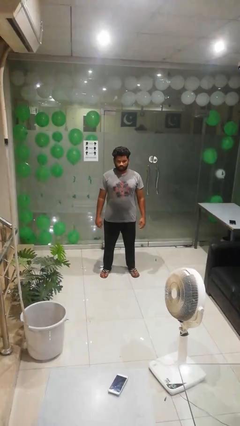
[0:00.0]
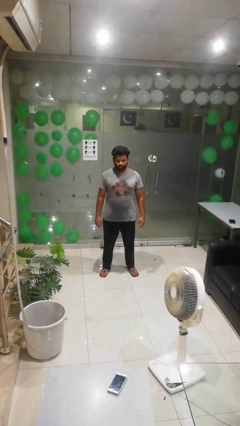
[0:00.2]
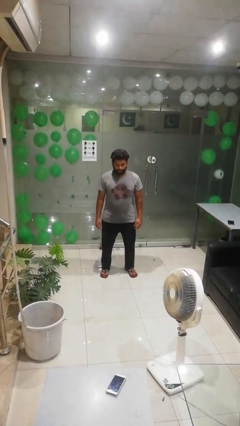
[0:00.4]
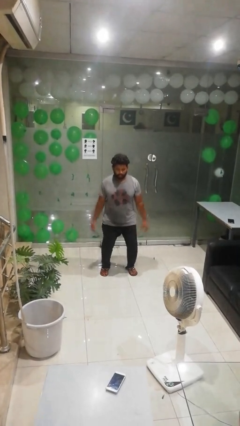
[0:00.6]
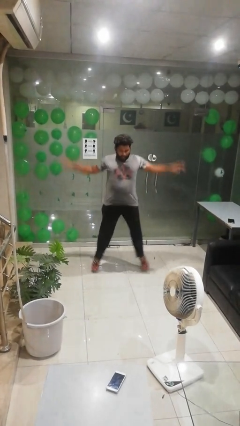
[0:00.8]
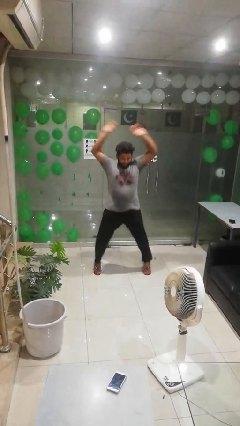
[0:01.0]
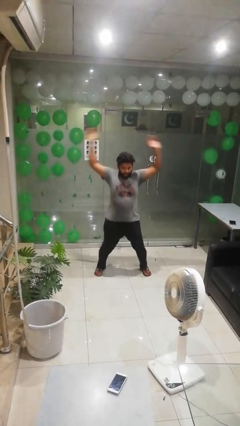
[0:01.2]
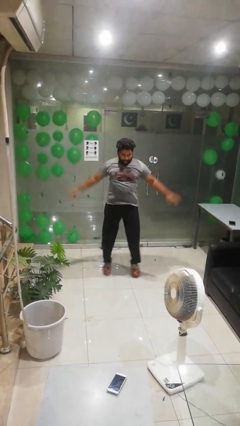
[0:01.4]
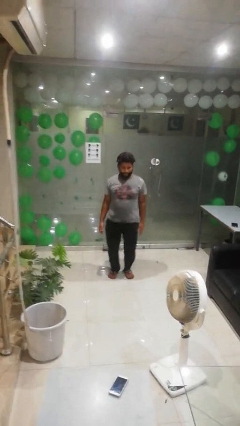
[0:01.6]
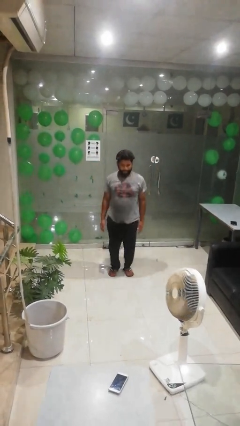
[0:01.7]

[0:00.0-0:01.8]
person exercises with jumping jacks

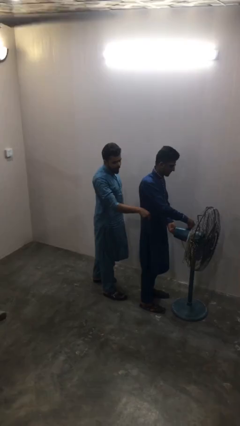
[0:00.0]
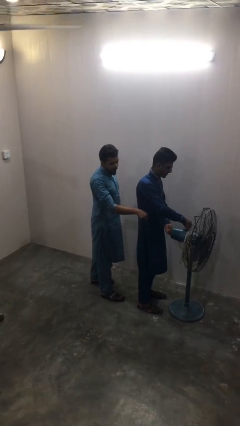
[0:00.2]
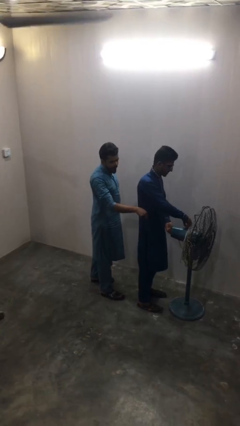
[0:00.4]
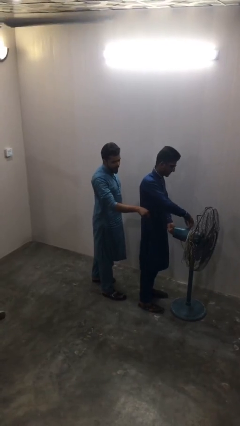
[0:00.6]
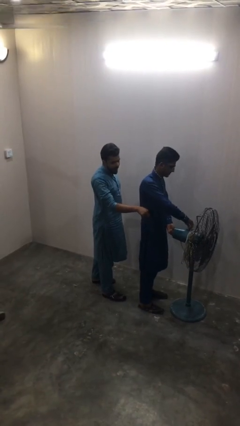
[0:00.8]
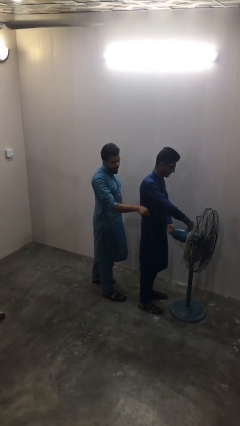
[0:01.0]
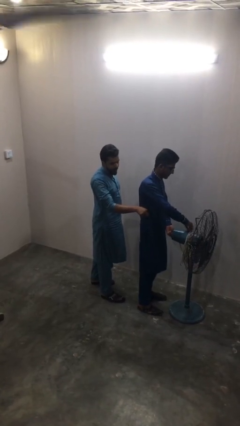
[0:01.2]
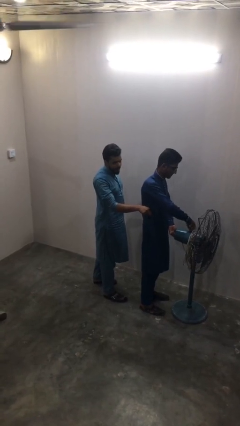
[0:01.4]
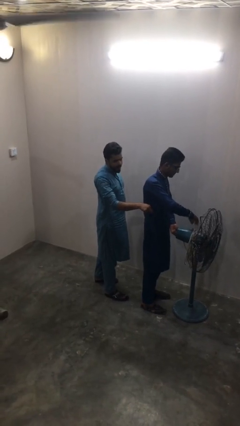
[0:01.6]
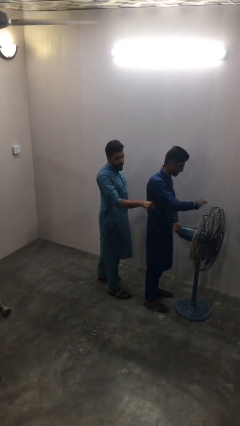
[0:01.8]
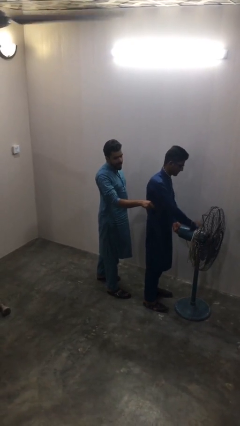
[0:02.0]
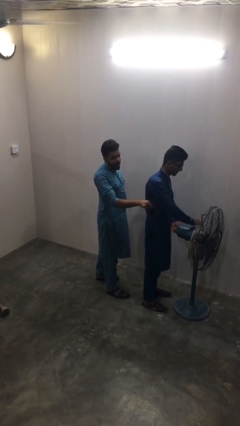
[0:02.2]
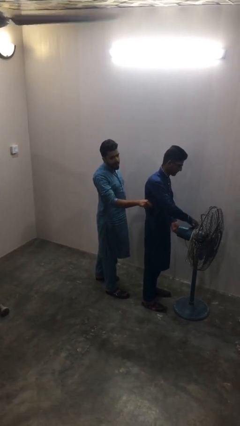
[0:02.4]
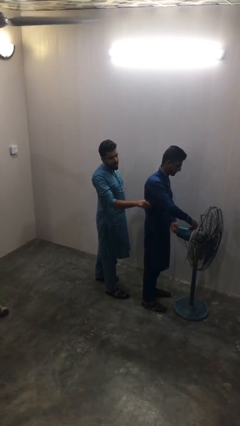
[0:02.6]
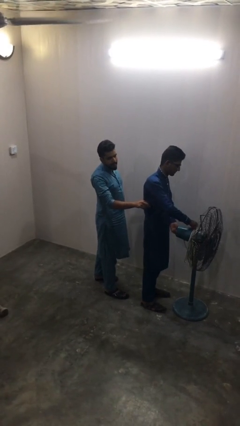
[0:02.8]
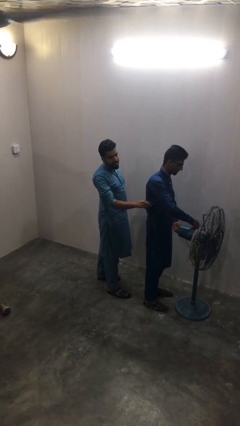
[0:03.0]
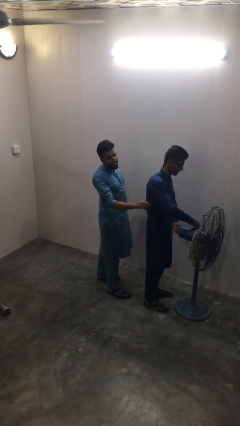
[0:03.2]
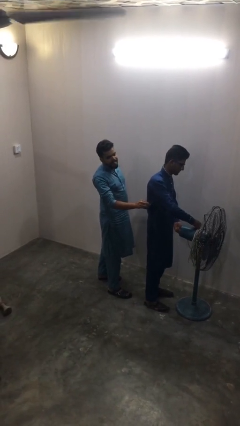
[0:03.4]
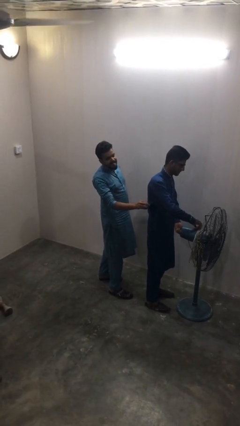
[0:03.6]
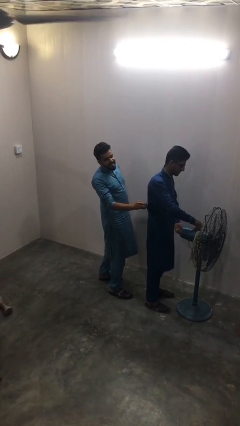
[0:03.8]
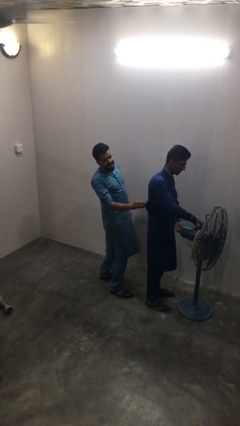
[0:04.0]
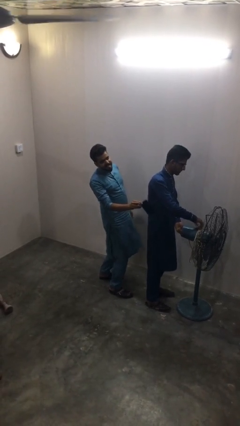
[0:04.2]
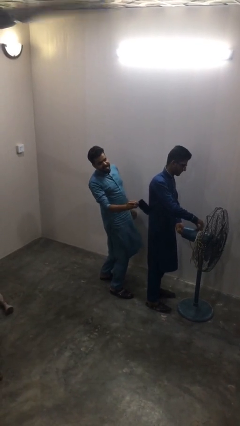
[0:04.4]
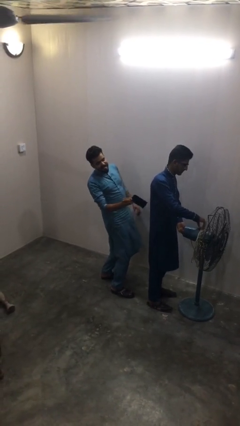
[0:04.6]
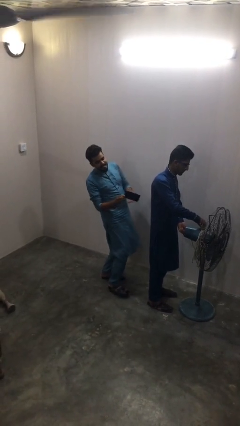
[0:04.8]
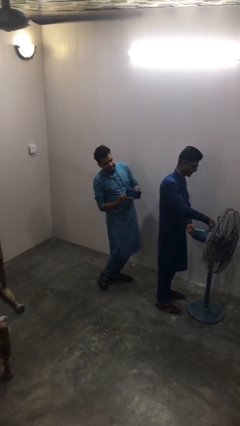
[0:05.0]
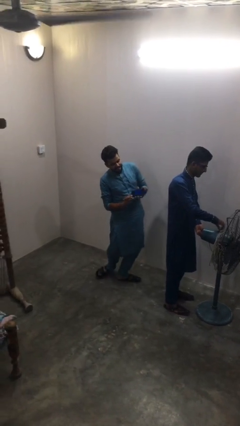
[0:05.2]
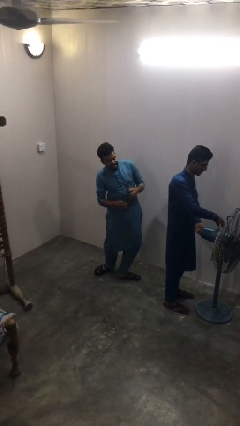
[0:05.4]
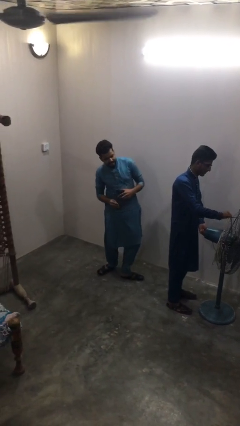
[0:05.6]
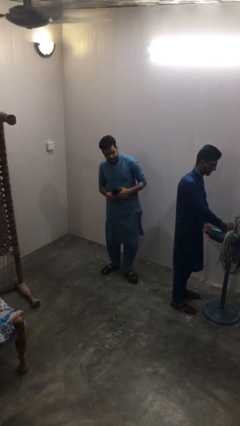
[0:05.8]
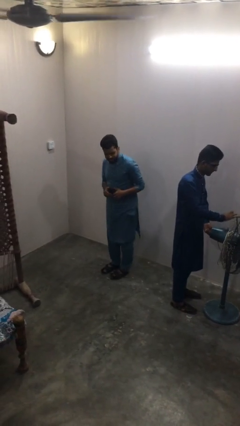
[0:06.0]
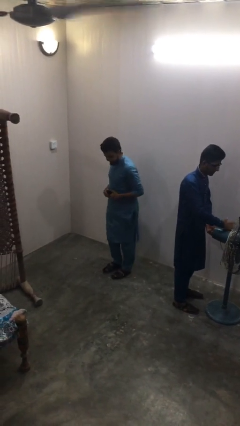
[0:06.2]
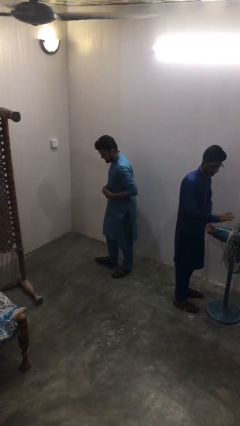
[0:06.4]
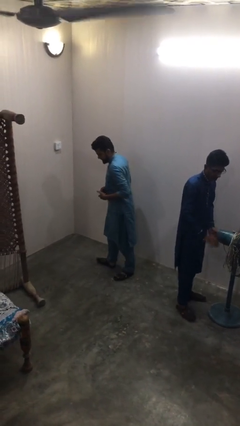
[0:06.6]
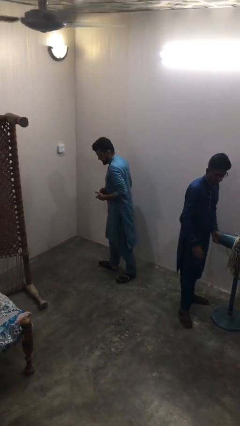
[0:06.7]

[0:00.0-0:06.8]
person steals object from person

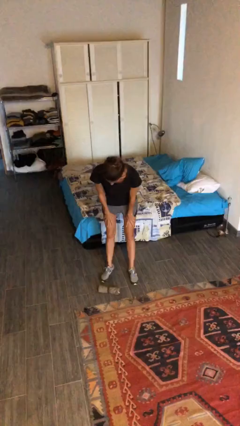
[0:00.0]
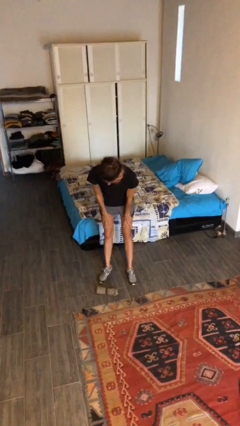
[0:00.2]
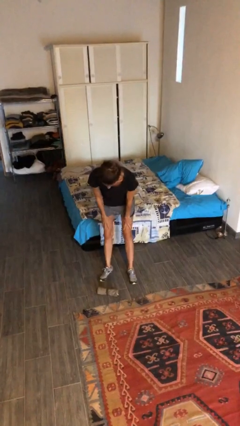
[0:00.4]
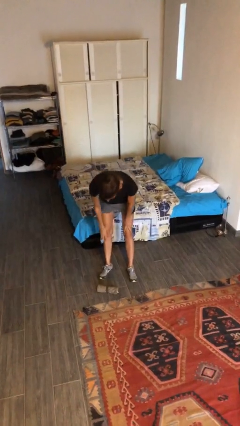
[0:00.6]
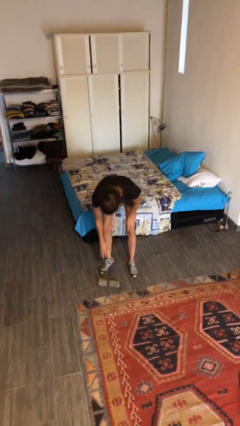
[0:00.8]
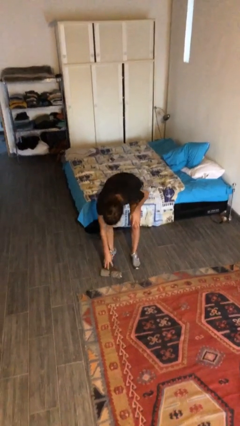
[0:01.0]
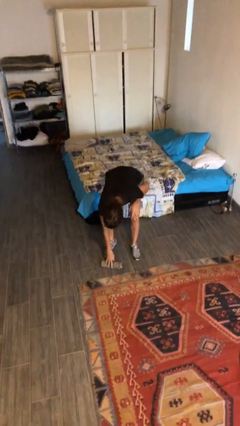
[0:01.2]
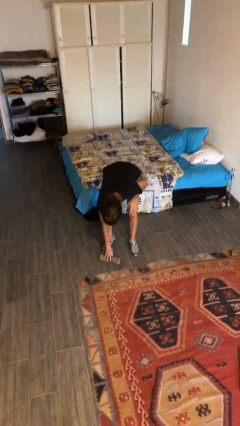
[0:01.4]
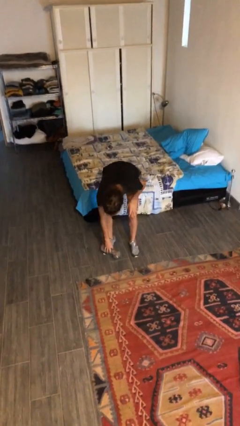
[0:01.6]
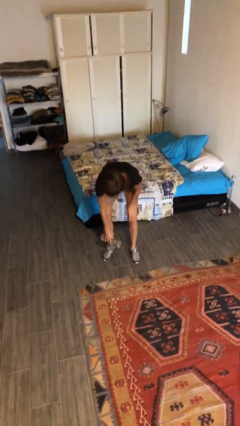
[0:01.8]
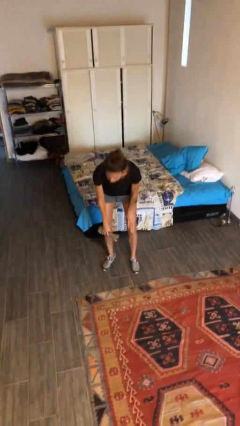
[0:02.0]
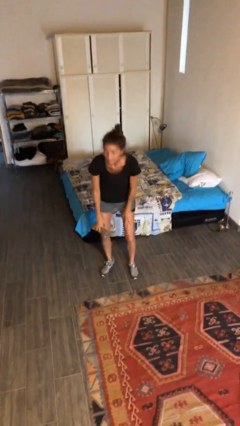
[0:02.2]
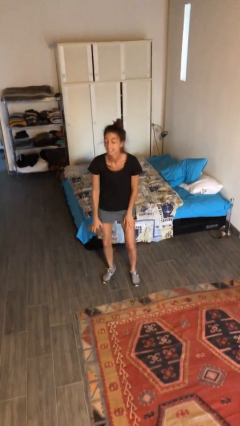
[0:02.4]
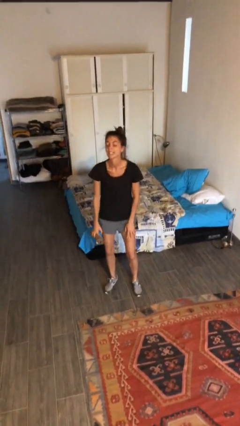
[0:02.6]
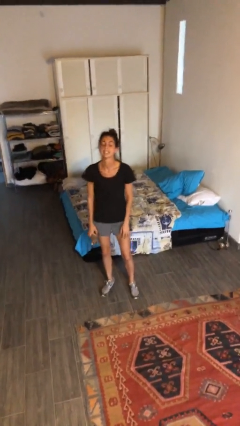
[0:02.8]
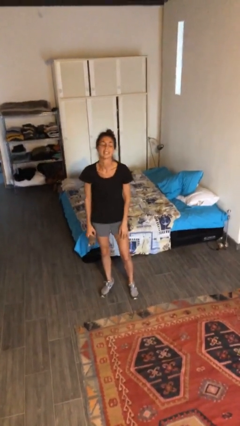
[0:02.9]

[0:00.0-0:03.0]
person picks up object from floor

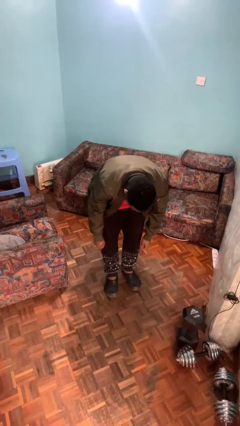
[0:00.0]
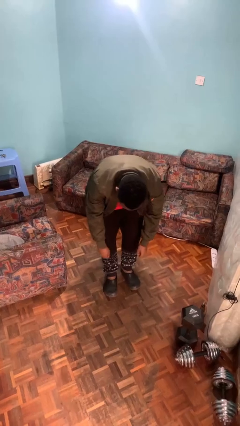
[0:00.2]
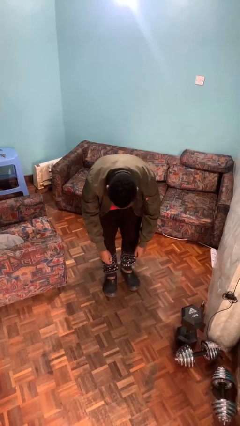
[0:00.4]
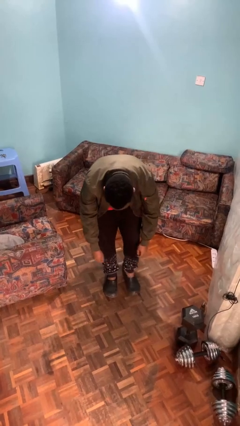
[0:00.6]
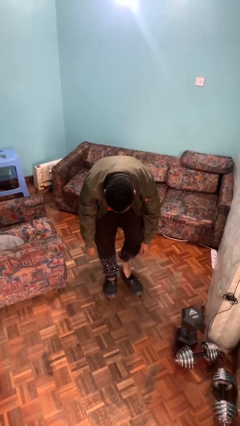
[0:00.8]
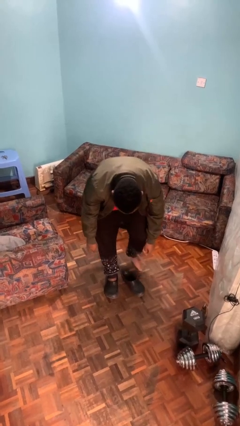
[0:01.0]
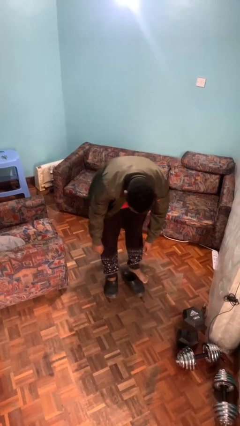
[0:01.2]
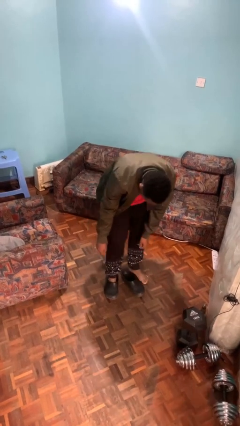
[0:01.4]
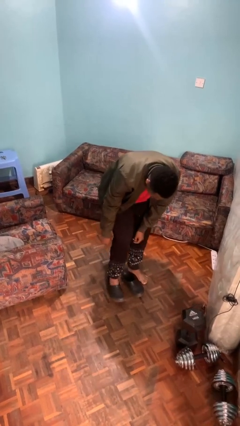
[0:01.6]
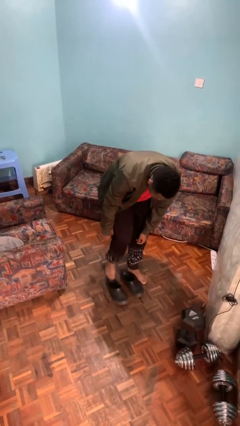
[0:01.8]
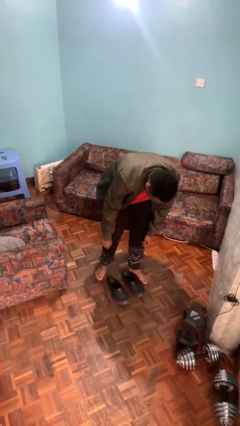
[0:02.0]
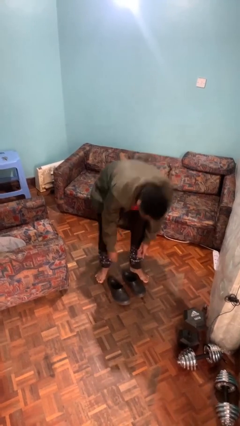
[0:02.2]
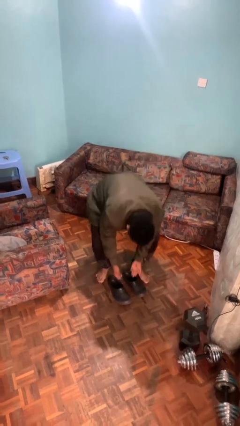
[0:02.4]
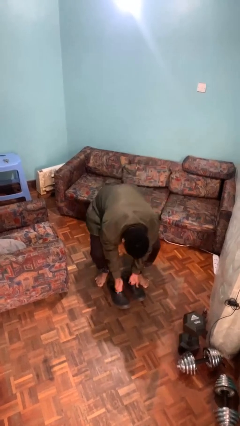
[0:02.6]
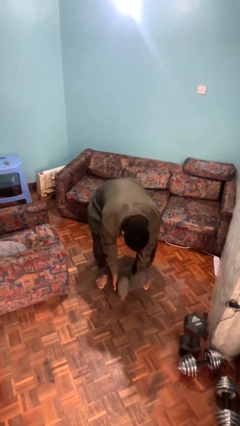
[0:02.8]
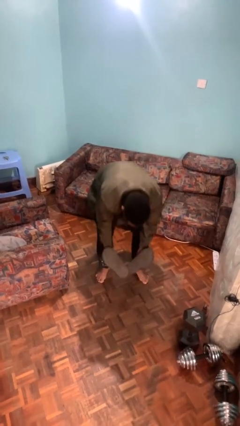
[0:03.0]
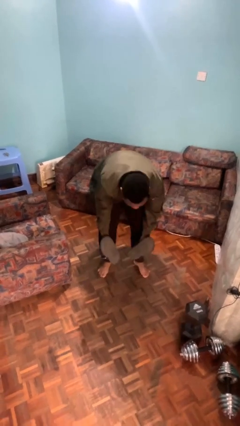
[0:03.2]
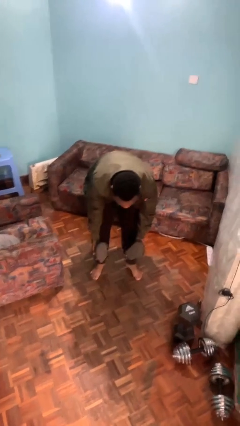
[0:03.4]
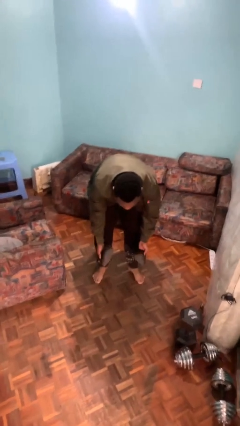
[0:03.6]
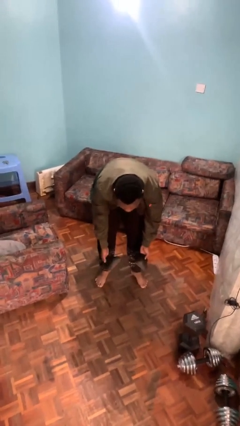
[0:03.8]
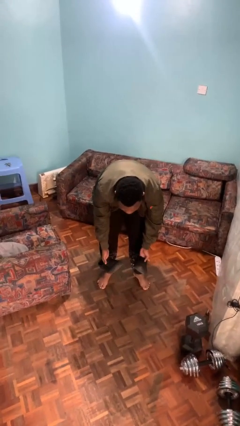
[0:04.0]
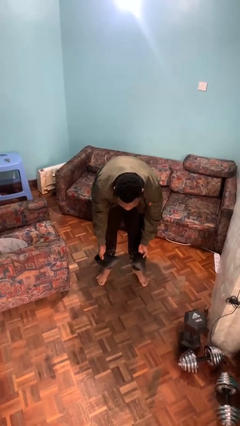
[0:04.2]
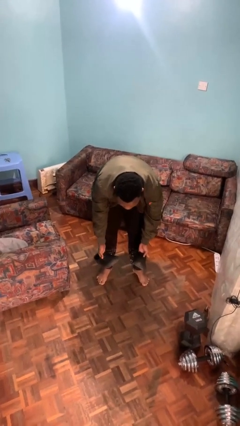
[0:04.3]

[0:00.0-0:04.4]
person takes off shoes

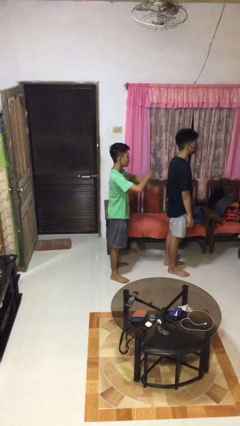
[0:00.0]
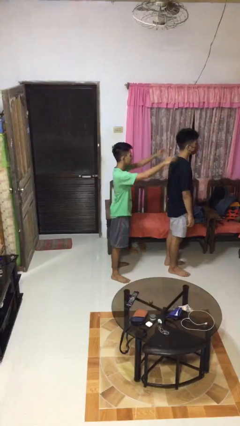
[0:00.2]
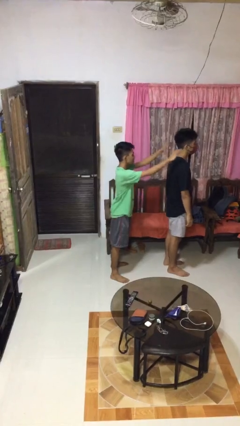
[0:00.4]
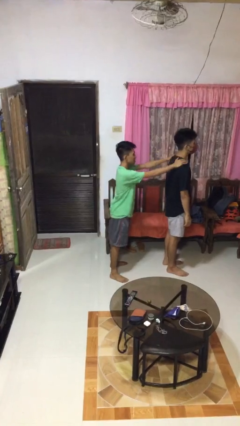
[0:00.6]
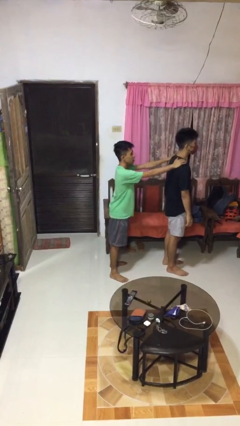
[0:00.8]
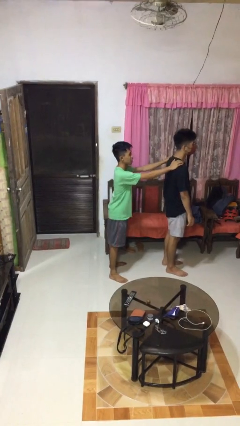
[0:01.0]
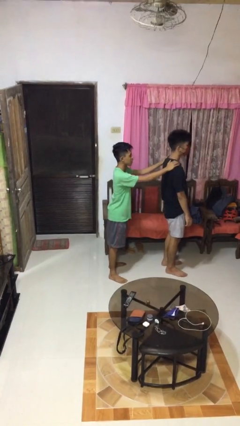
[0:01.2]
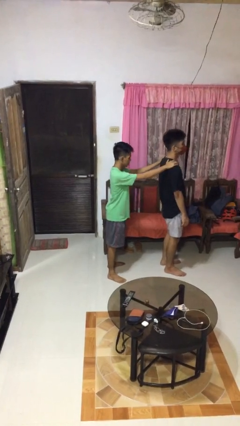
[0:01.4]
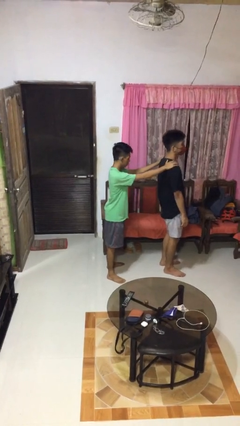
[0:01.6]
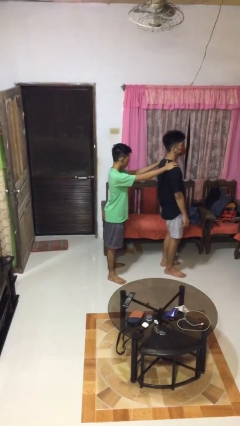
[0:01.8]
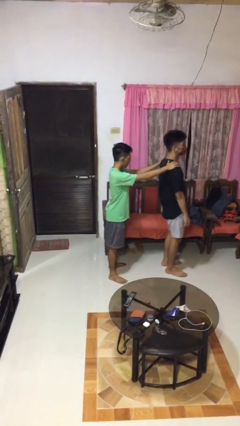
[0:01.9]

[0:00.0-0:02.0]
person grabs person by shoulder
